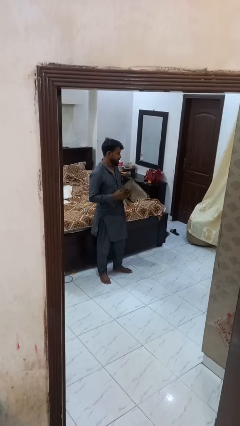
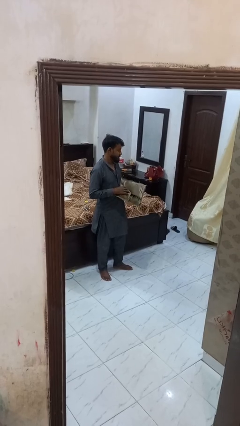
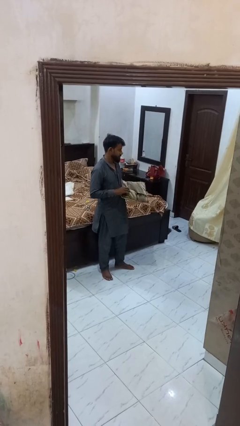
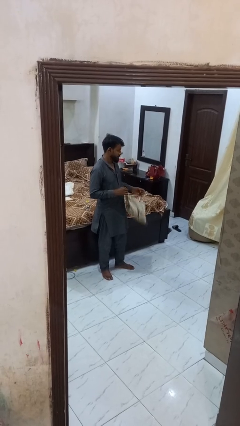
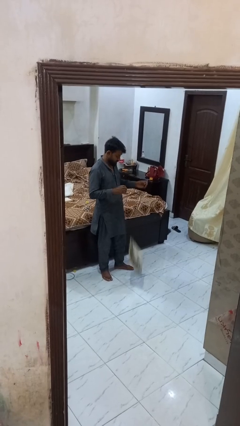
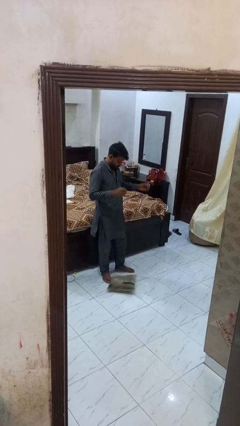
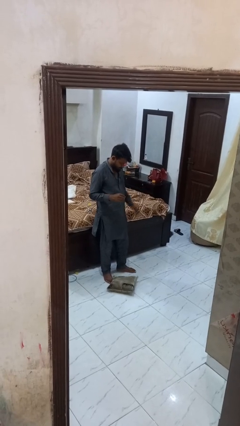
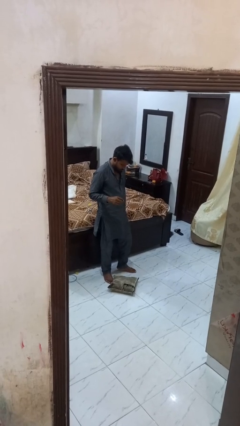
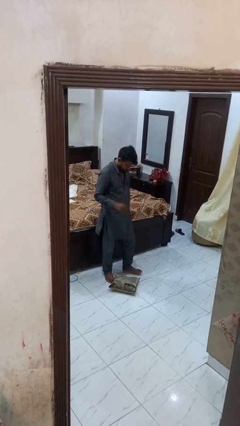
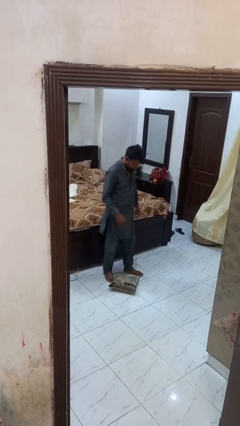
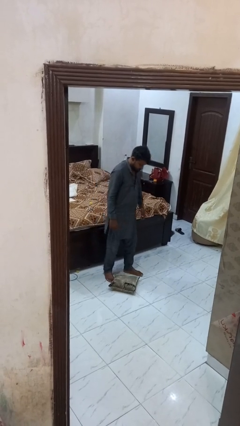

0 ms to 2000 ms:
person drops object

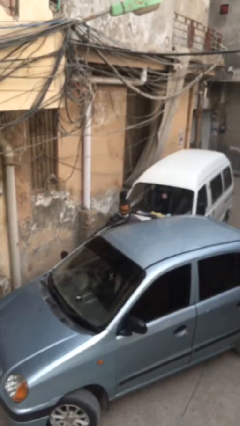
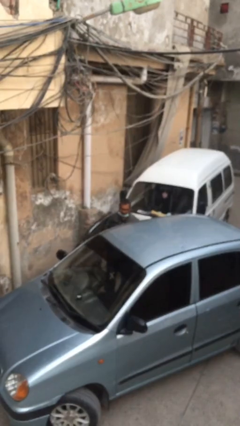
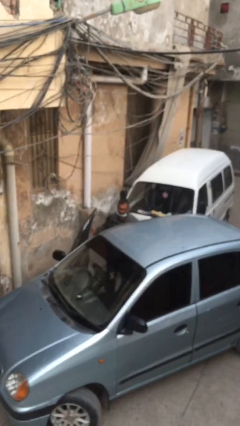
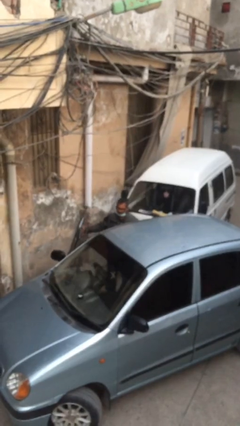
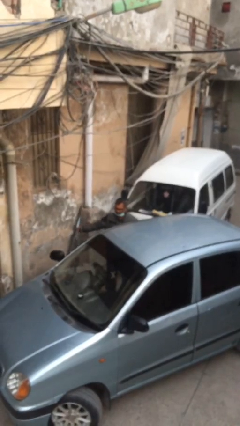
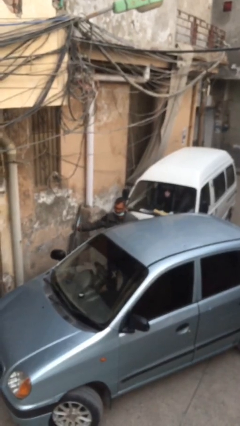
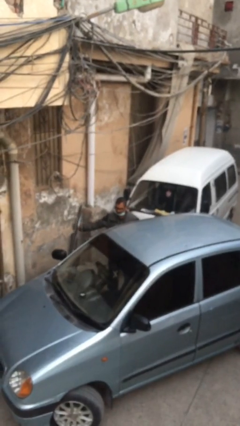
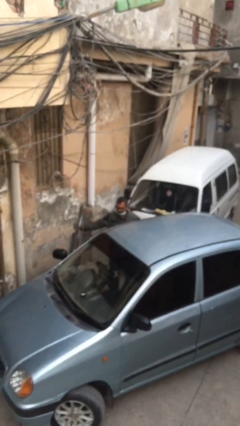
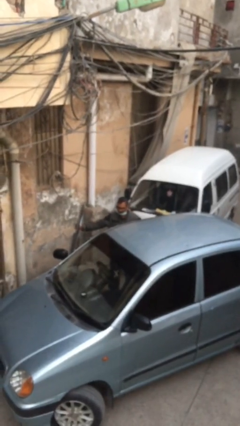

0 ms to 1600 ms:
person opens car door

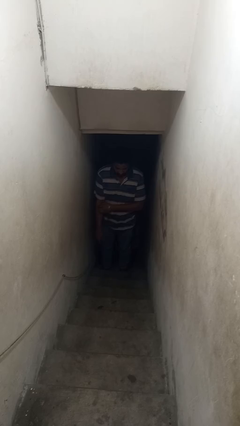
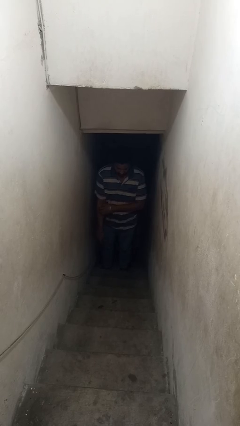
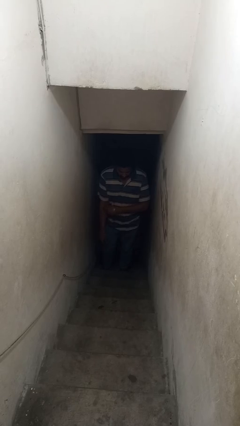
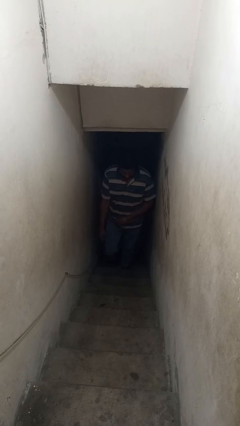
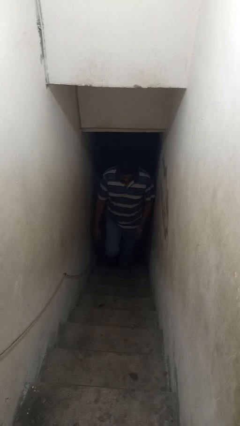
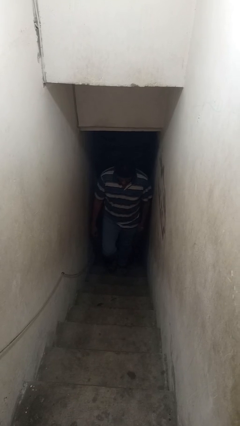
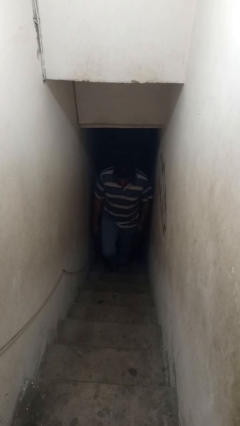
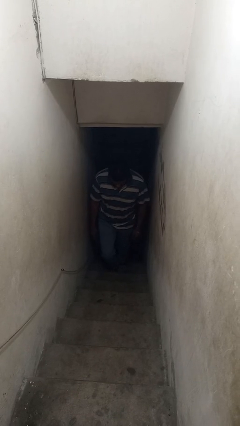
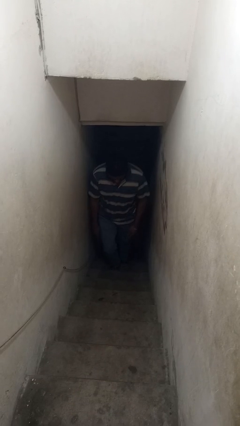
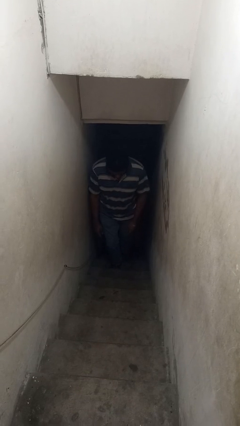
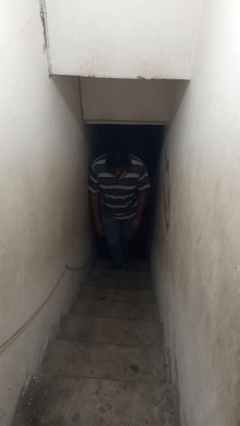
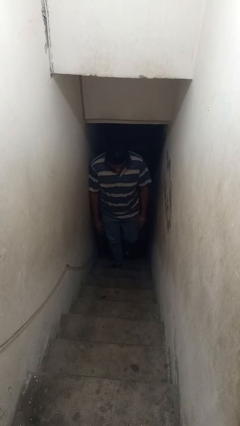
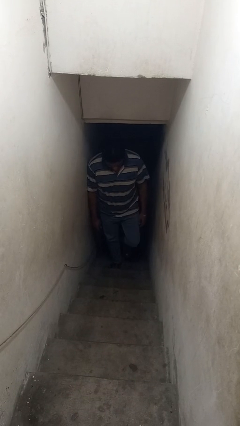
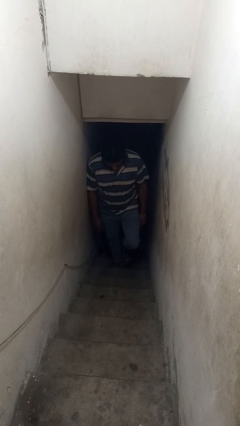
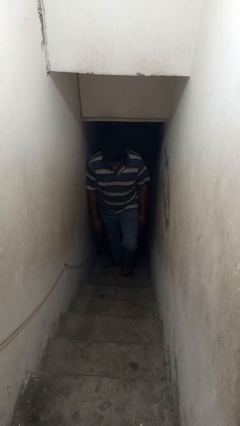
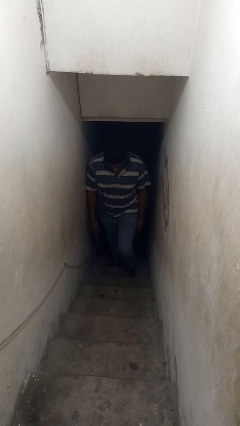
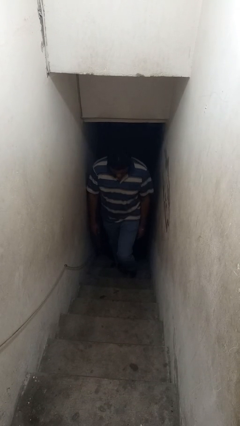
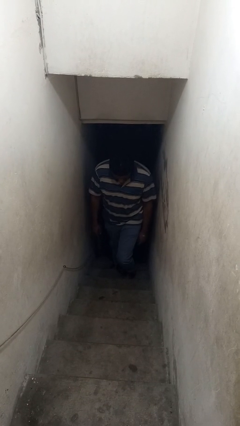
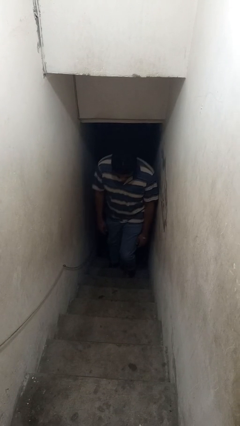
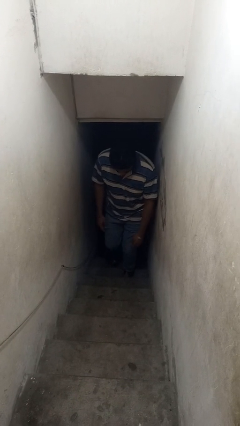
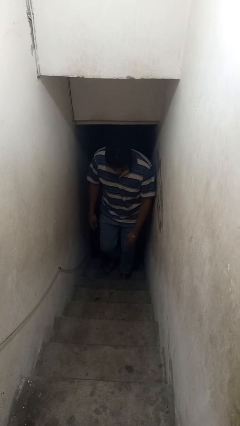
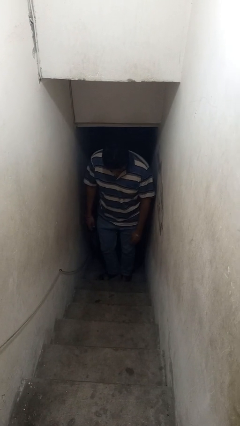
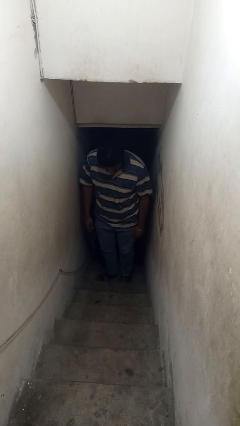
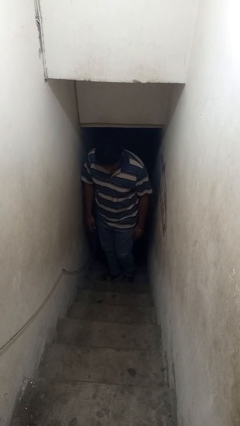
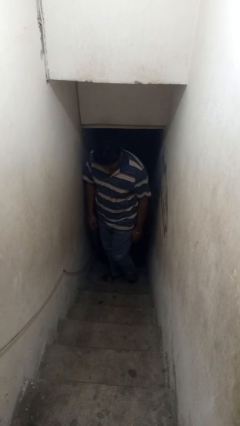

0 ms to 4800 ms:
person climbs up stairs

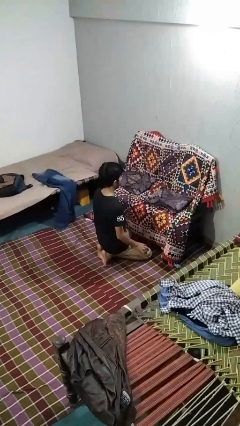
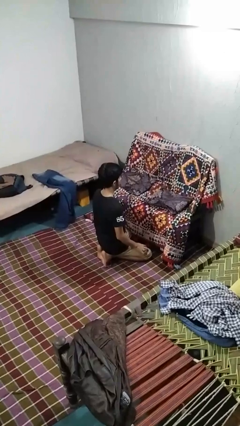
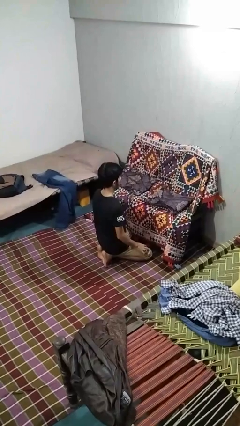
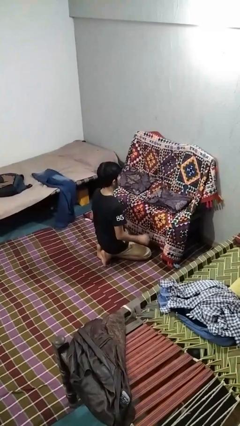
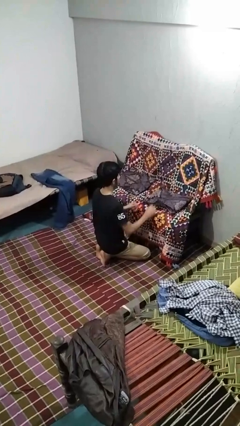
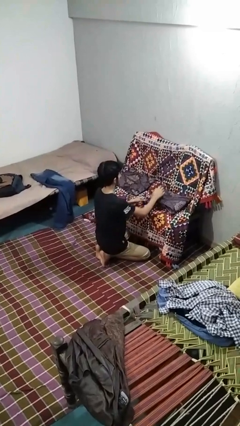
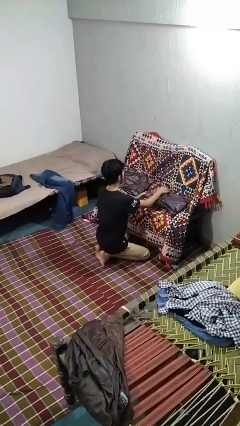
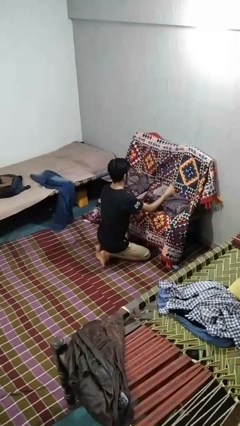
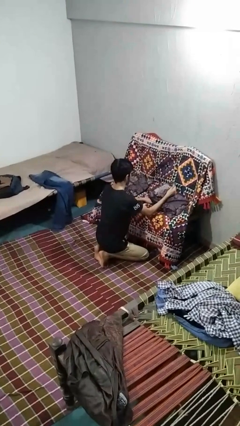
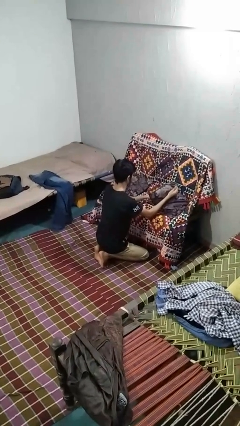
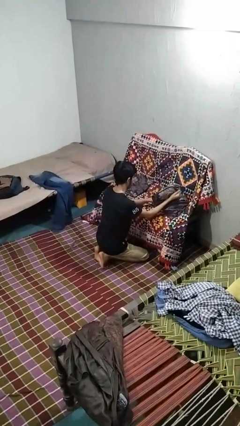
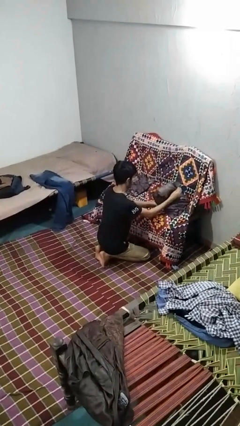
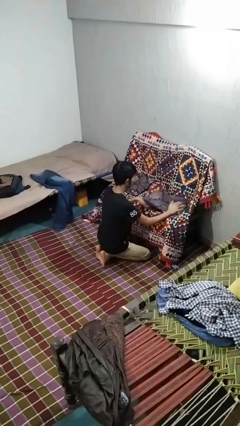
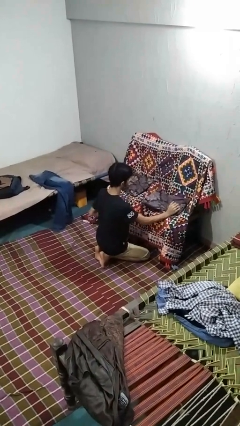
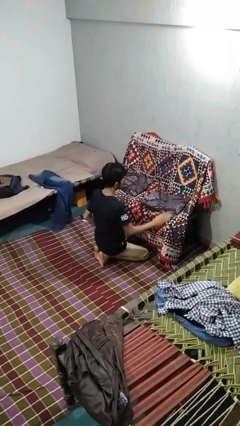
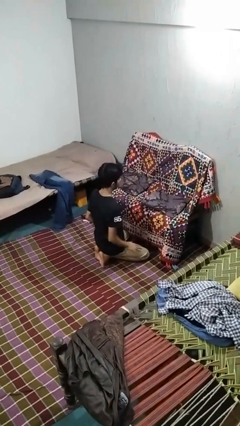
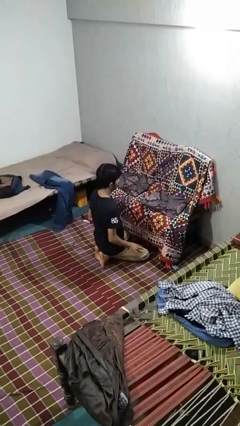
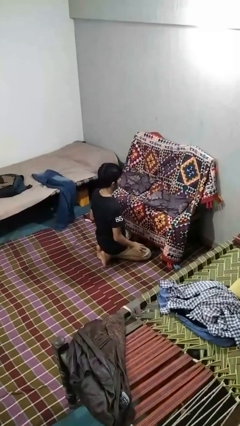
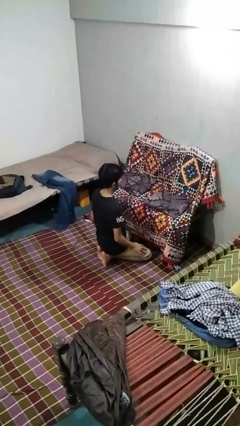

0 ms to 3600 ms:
person searches in couch

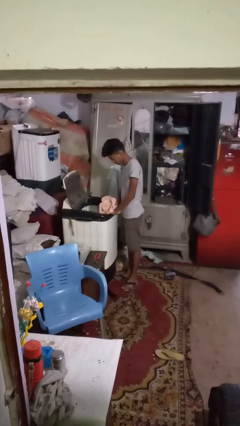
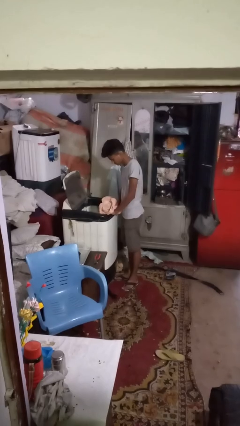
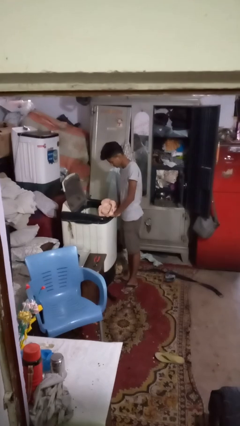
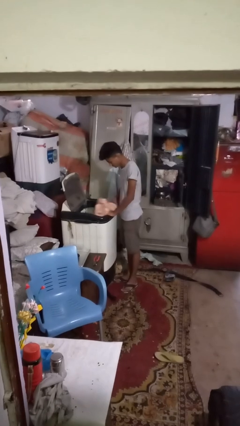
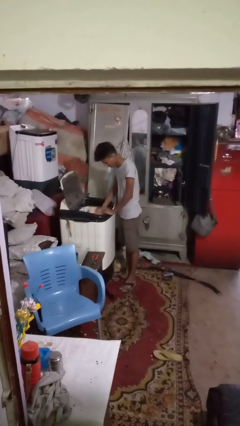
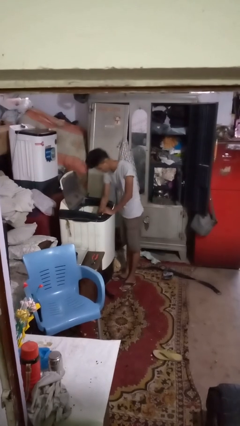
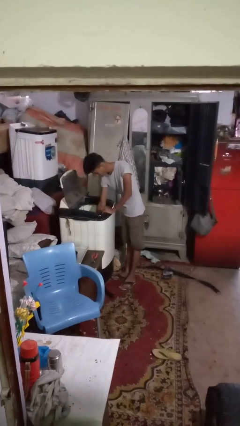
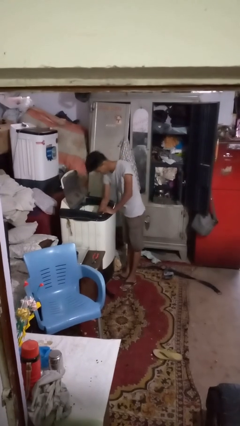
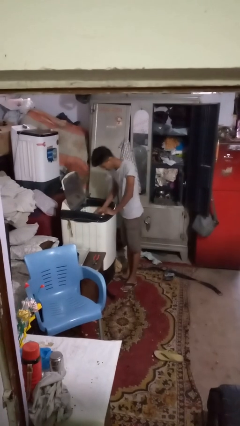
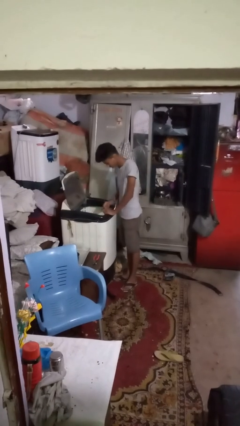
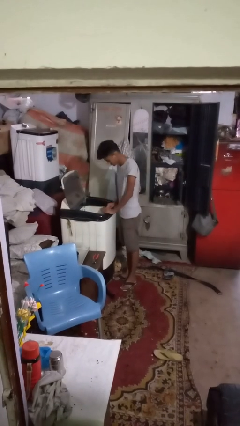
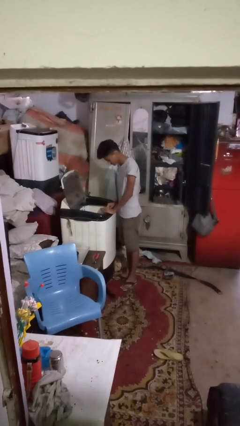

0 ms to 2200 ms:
person loads clotheswasher

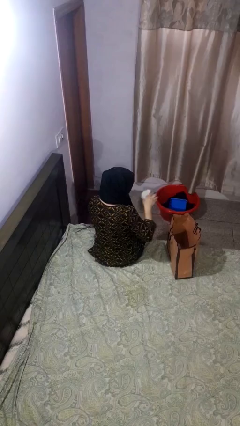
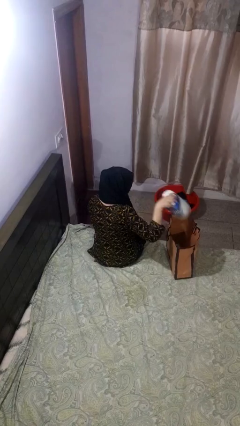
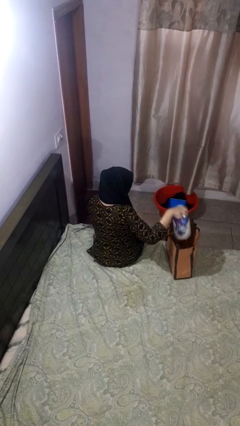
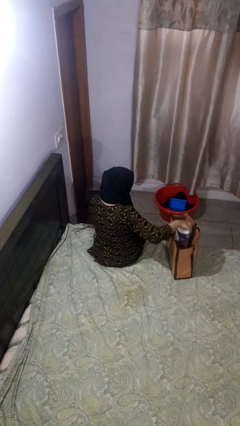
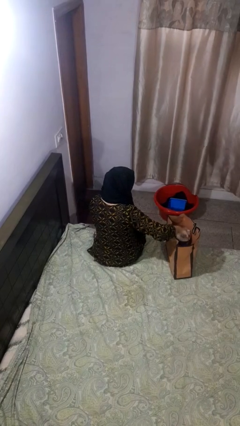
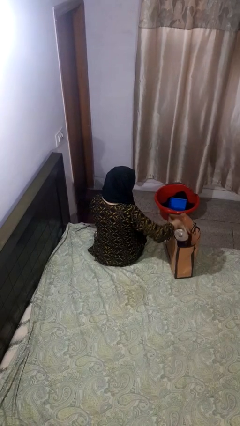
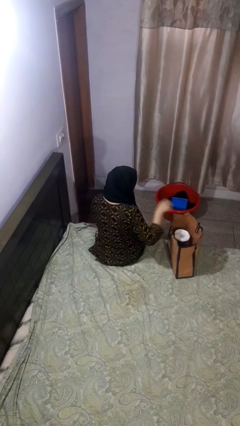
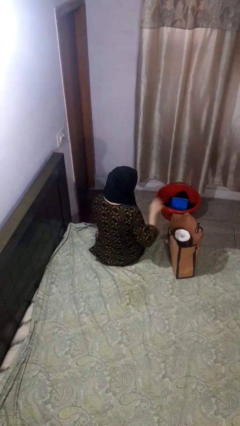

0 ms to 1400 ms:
person puts object into bag

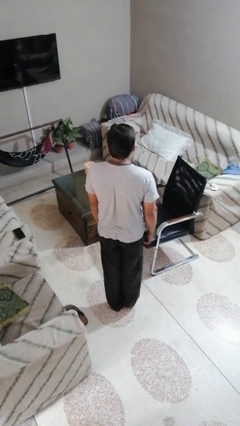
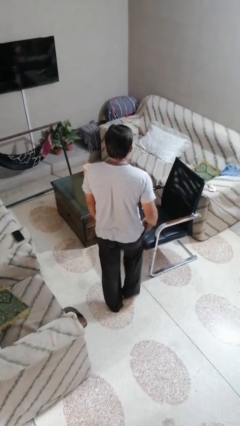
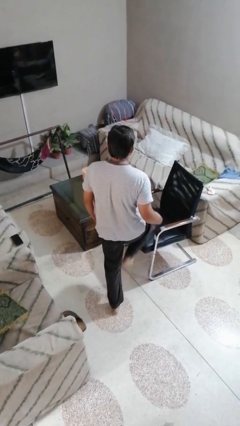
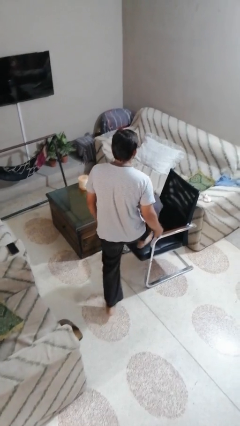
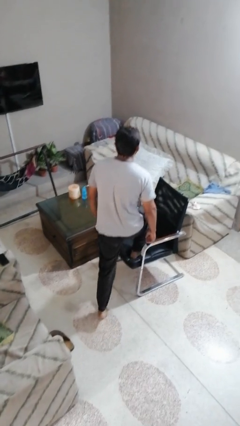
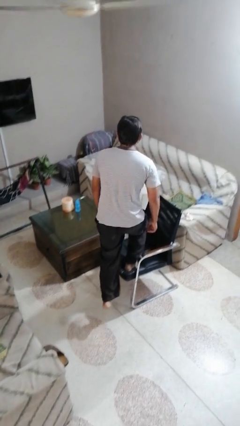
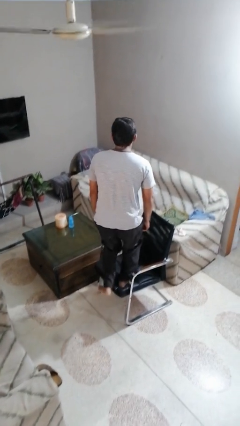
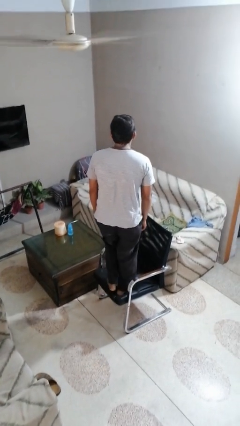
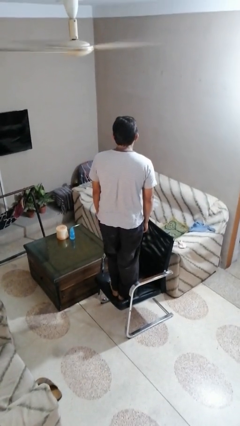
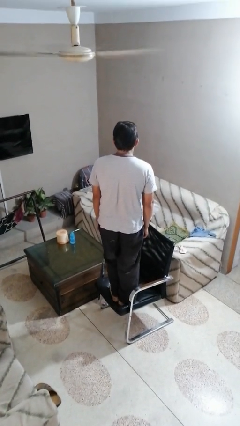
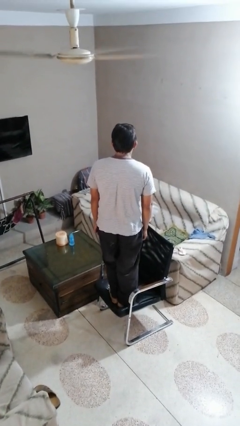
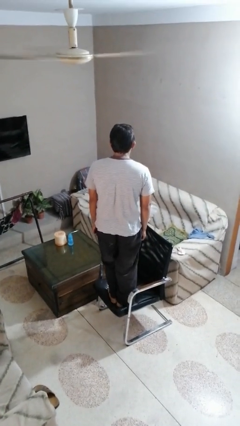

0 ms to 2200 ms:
person climbs on chair
